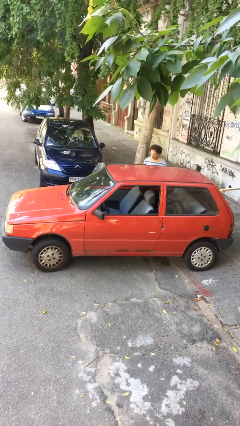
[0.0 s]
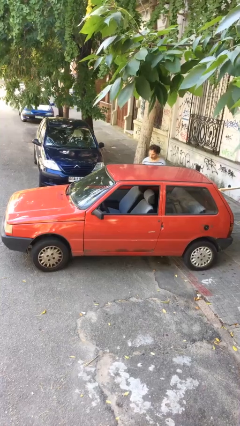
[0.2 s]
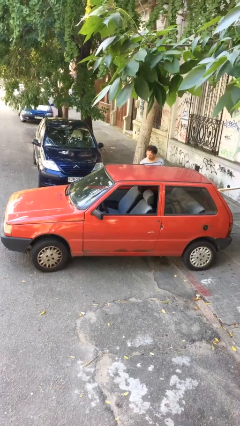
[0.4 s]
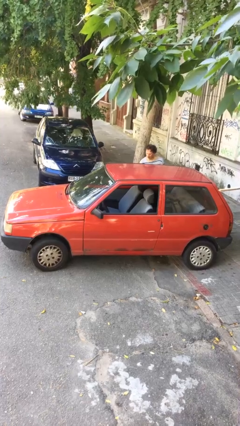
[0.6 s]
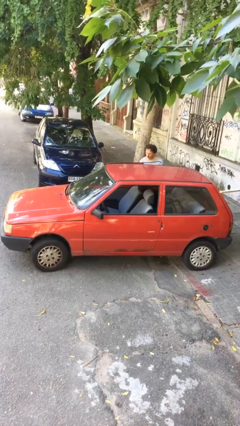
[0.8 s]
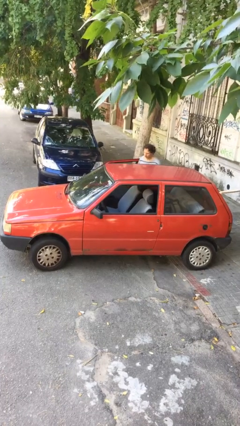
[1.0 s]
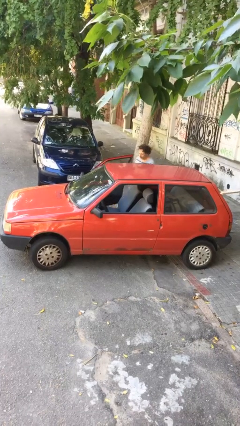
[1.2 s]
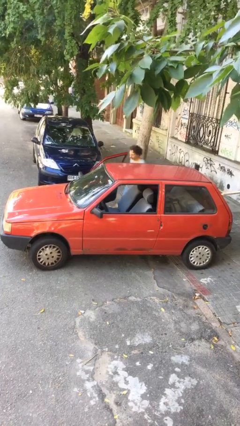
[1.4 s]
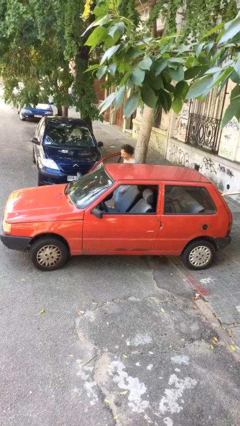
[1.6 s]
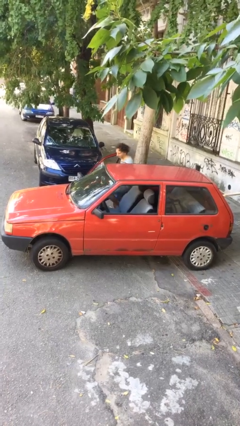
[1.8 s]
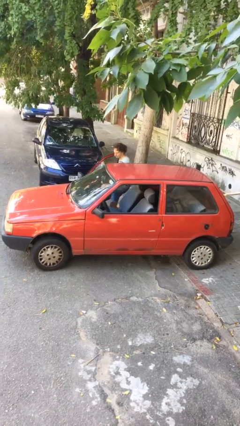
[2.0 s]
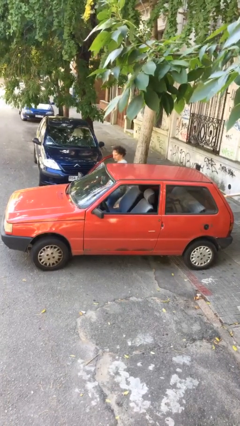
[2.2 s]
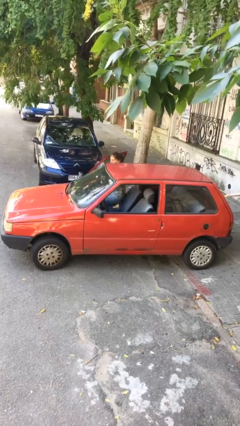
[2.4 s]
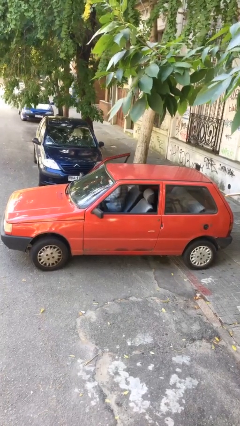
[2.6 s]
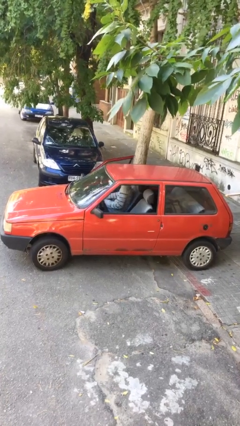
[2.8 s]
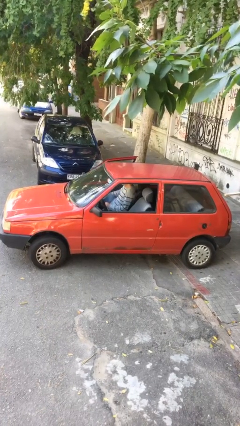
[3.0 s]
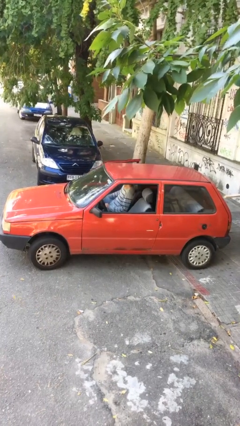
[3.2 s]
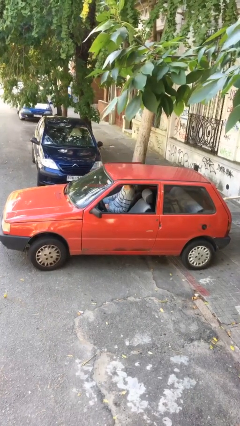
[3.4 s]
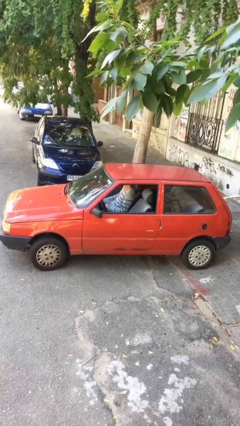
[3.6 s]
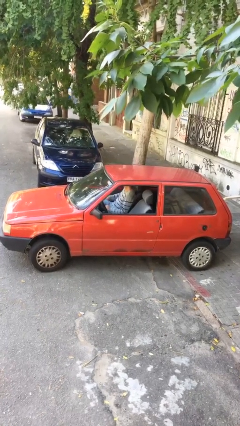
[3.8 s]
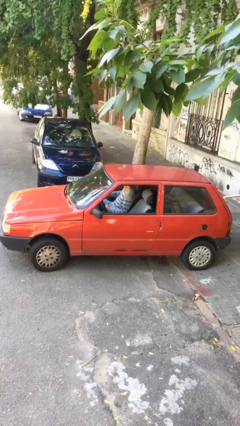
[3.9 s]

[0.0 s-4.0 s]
car picks up person

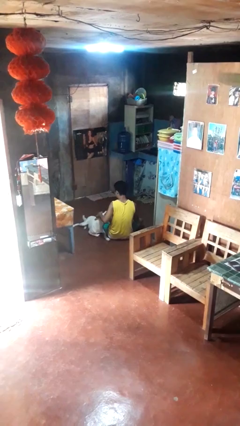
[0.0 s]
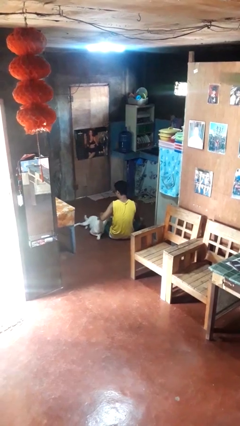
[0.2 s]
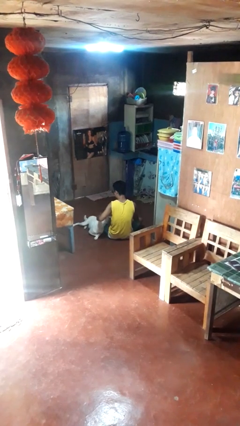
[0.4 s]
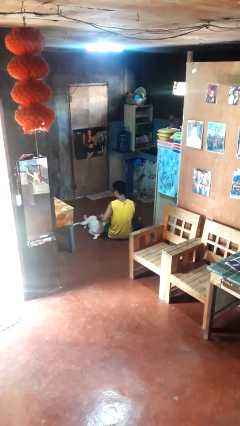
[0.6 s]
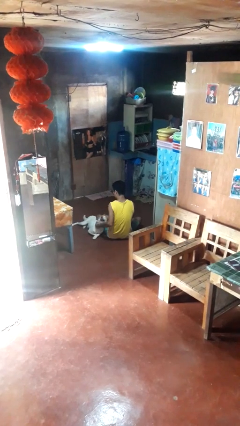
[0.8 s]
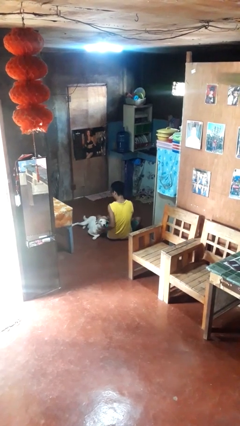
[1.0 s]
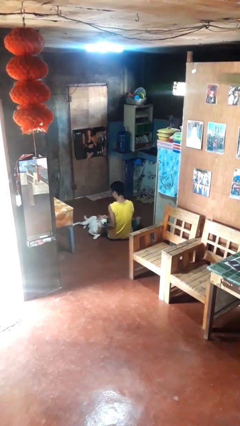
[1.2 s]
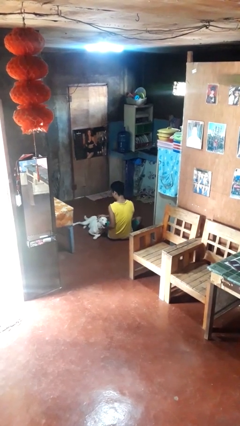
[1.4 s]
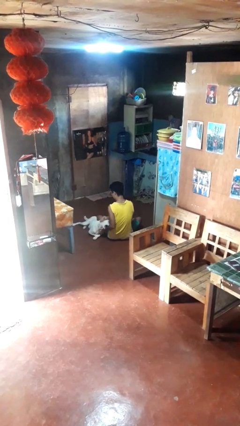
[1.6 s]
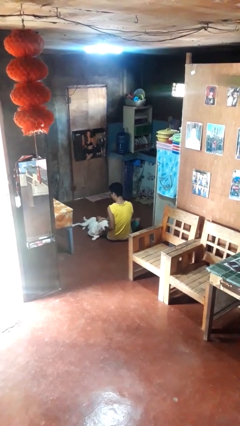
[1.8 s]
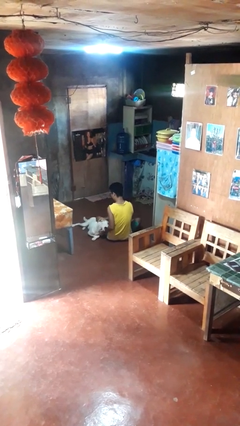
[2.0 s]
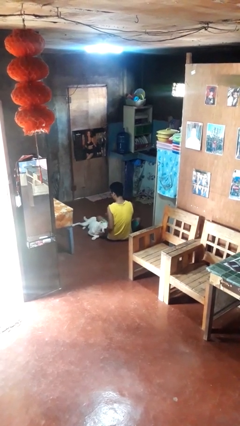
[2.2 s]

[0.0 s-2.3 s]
person pets dog

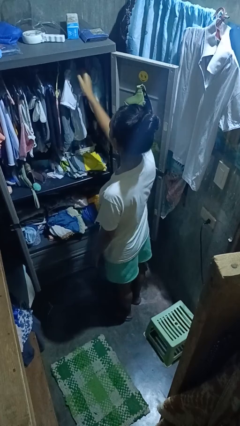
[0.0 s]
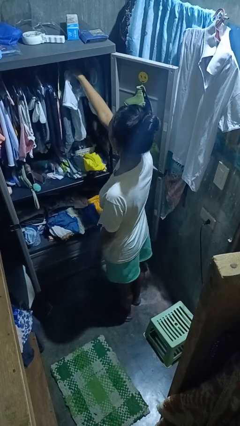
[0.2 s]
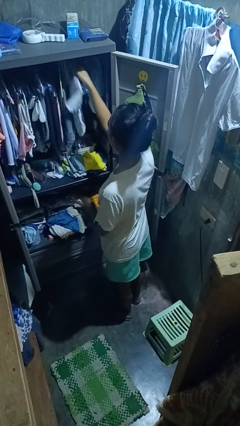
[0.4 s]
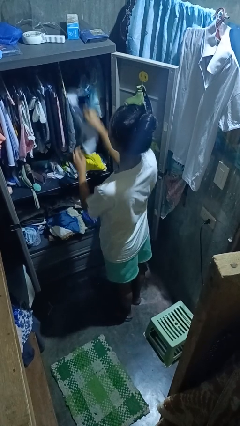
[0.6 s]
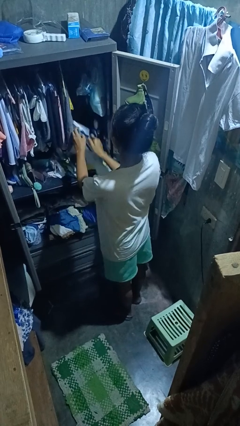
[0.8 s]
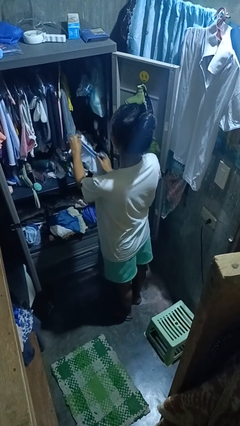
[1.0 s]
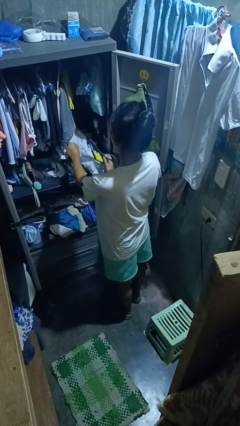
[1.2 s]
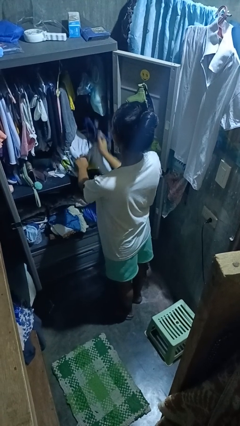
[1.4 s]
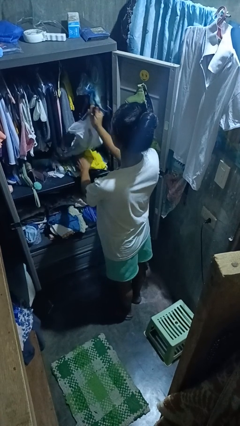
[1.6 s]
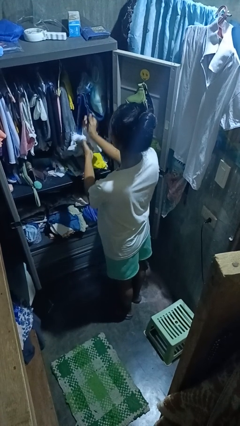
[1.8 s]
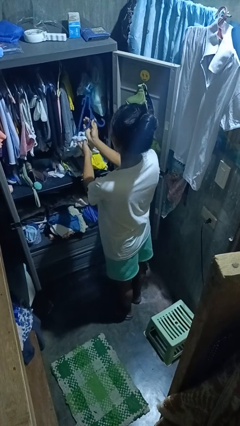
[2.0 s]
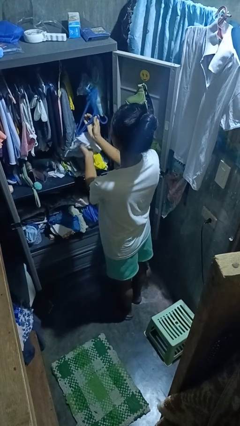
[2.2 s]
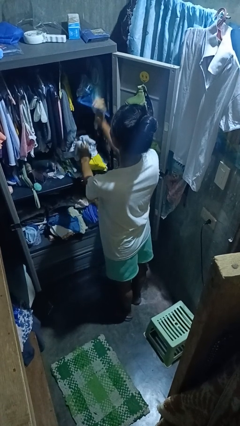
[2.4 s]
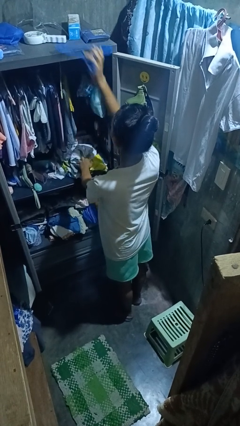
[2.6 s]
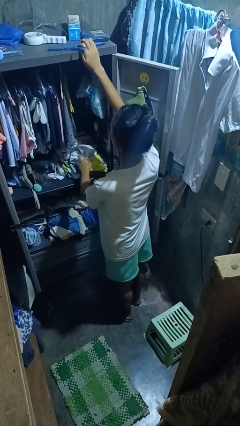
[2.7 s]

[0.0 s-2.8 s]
person takes clothes from closet

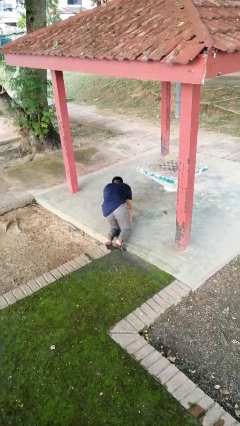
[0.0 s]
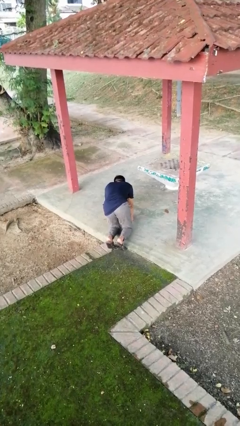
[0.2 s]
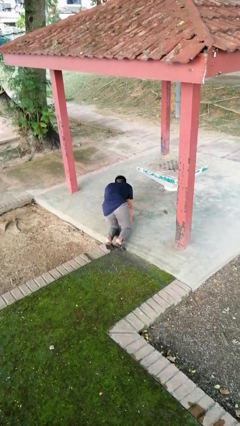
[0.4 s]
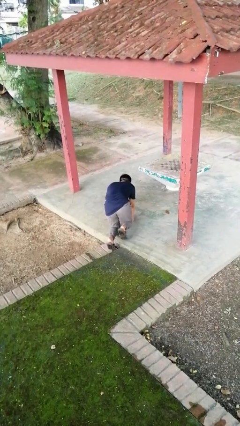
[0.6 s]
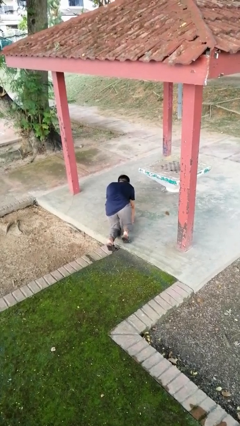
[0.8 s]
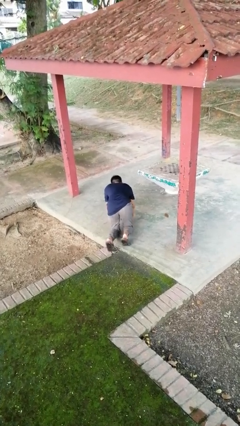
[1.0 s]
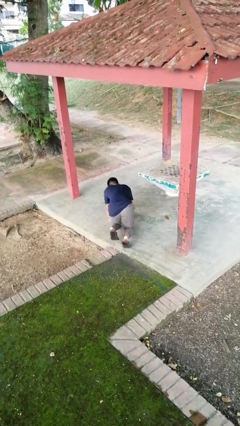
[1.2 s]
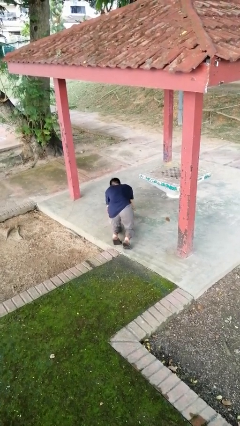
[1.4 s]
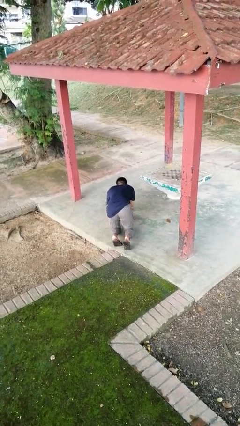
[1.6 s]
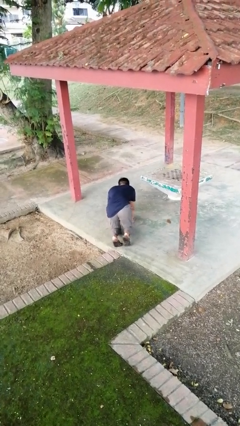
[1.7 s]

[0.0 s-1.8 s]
person crawls

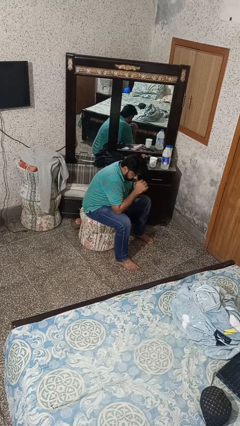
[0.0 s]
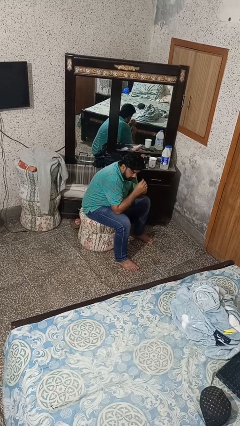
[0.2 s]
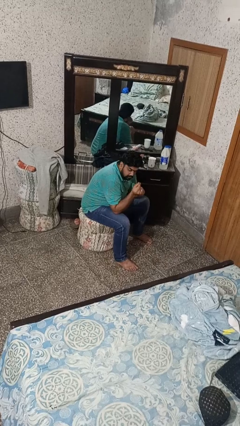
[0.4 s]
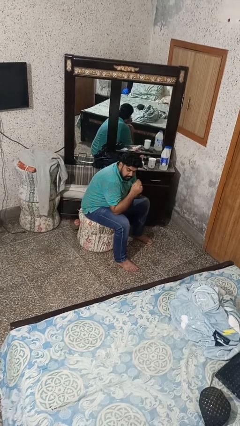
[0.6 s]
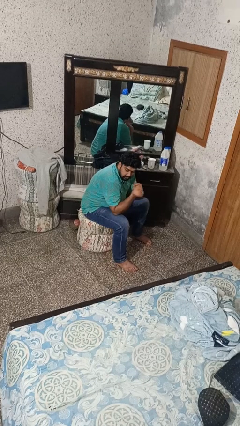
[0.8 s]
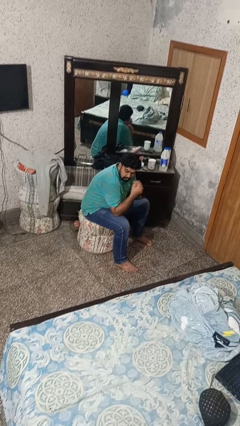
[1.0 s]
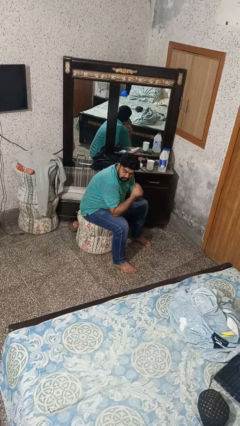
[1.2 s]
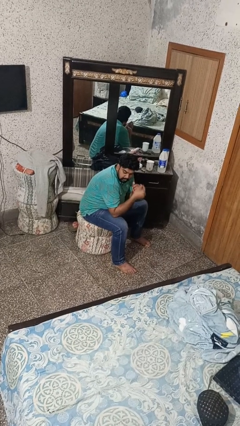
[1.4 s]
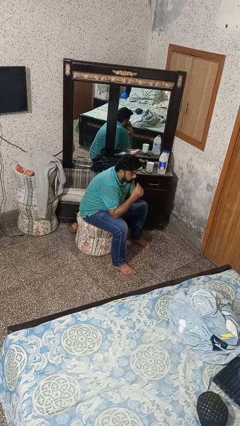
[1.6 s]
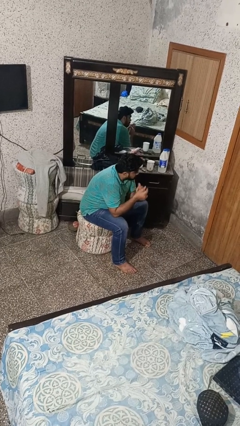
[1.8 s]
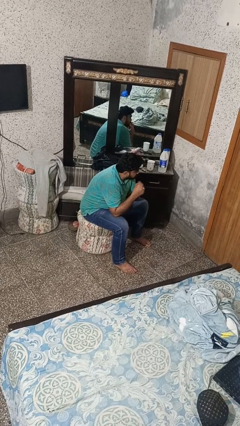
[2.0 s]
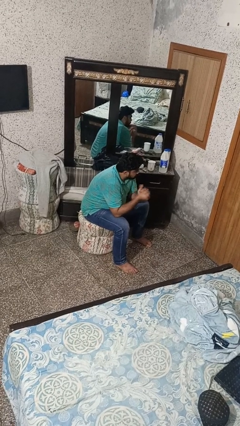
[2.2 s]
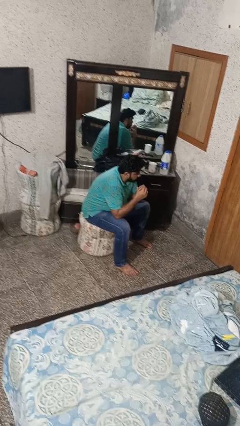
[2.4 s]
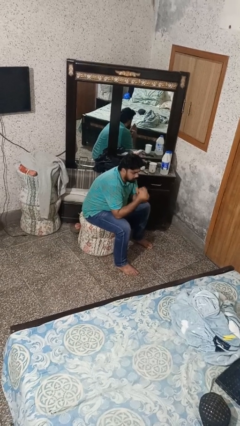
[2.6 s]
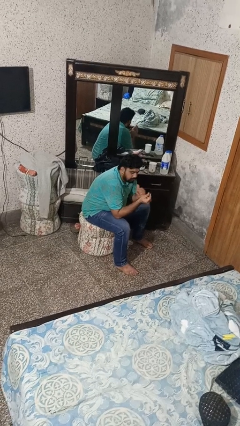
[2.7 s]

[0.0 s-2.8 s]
person snaps fingers

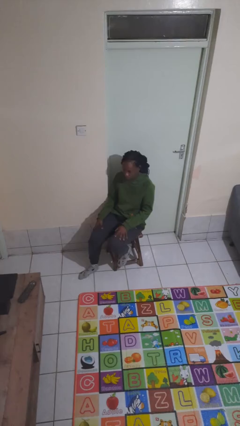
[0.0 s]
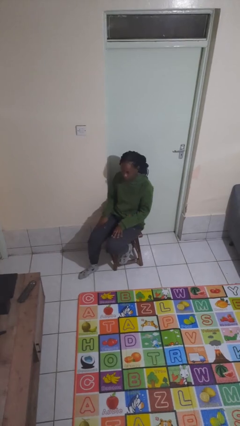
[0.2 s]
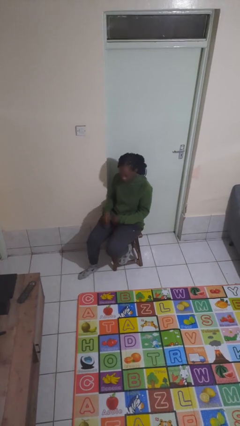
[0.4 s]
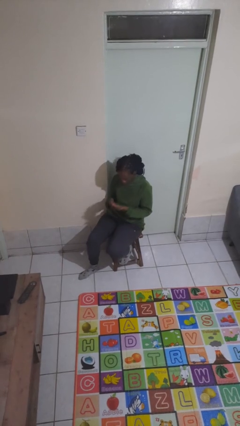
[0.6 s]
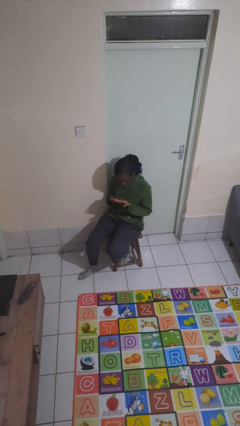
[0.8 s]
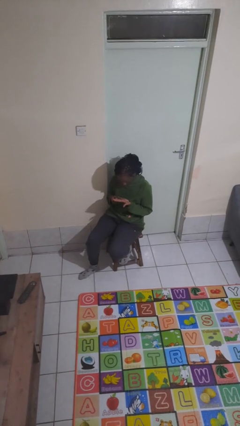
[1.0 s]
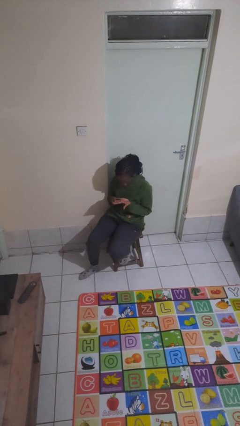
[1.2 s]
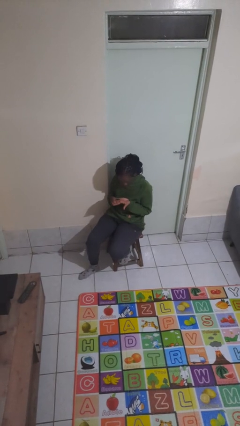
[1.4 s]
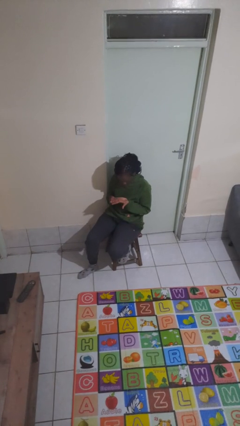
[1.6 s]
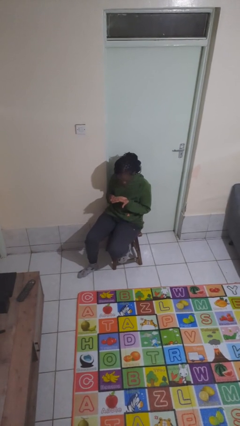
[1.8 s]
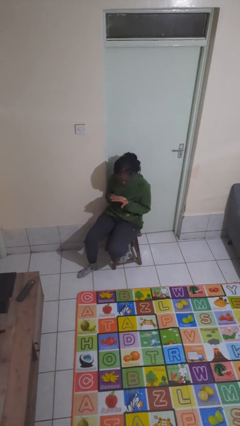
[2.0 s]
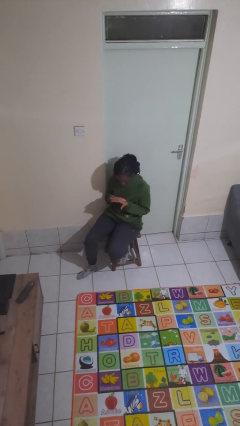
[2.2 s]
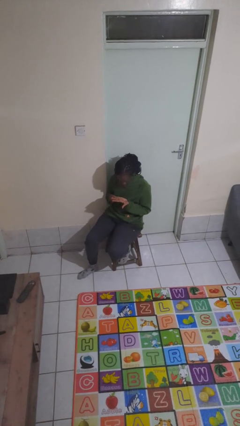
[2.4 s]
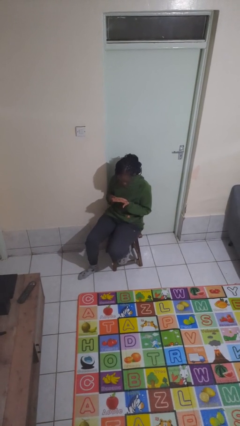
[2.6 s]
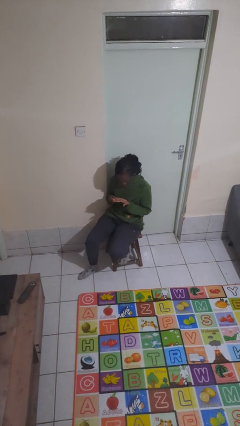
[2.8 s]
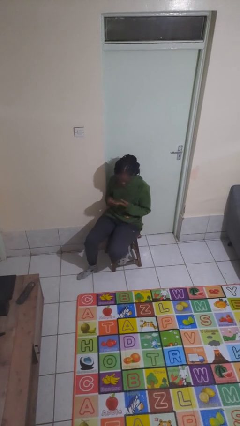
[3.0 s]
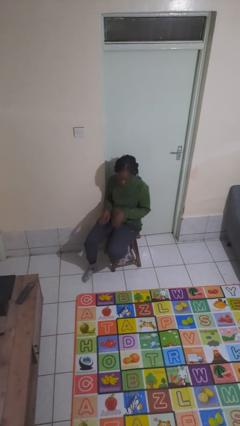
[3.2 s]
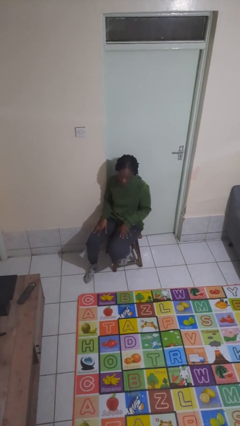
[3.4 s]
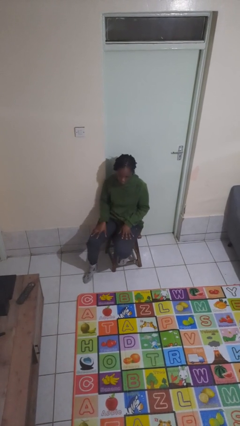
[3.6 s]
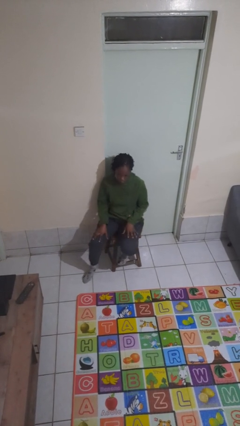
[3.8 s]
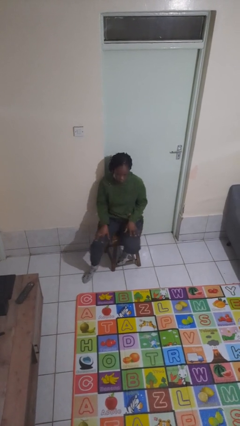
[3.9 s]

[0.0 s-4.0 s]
person looks at hands in lap
